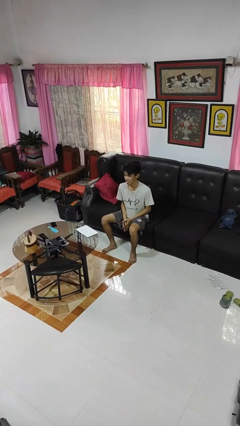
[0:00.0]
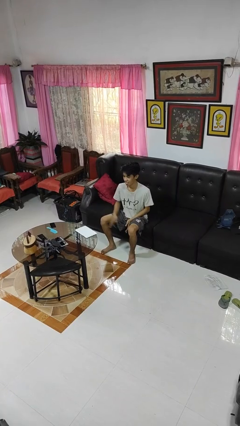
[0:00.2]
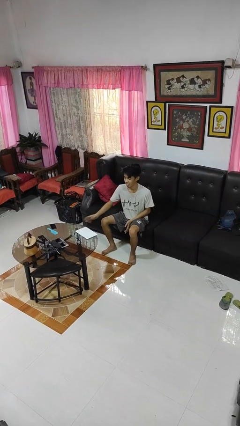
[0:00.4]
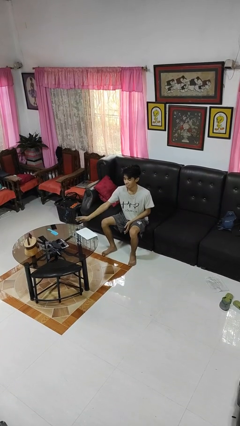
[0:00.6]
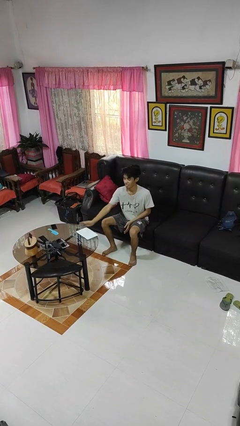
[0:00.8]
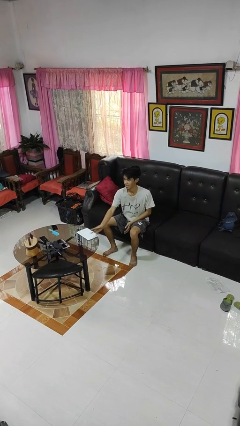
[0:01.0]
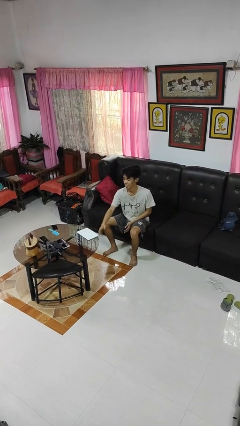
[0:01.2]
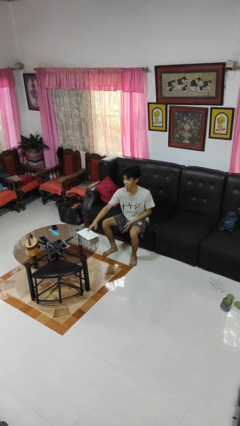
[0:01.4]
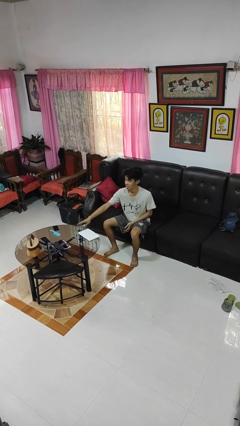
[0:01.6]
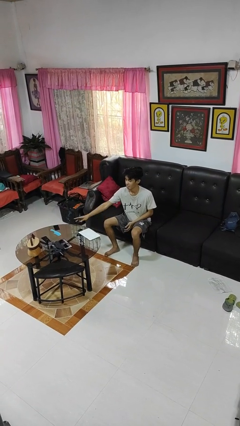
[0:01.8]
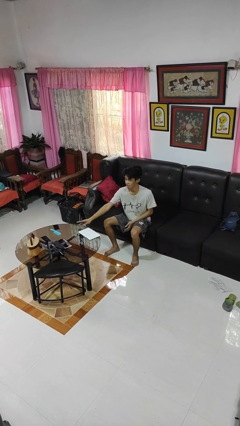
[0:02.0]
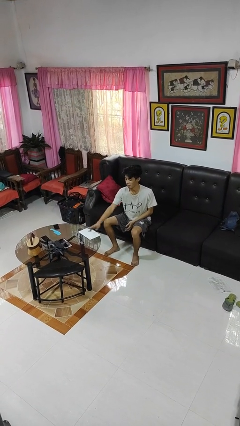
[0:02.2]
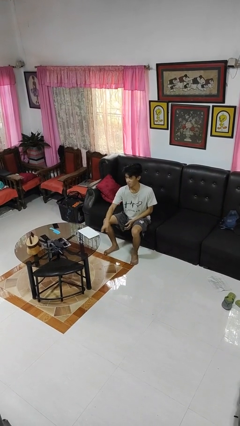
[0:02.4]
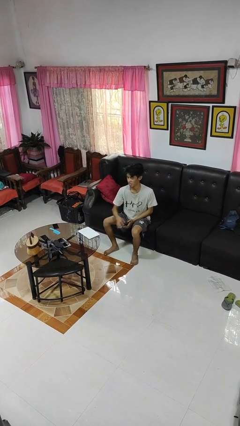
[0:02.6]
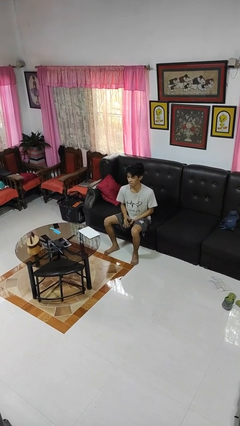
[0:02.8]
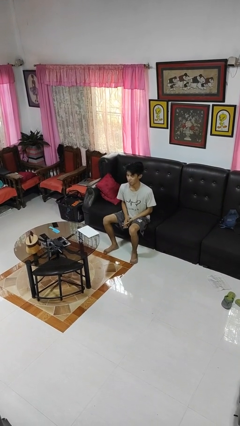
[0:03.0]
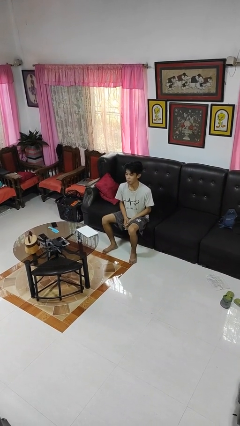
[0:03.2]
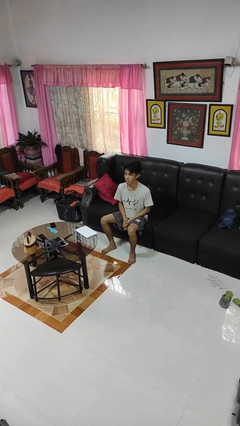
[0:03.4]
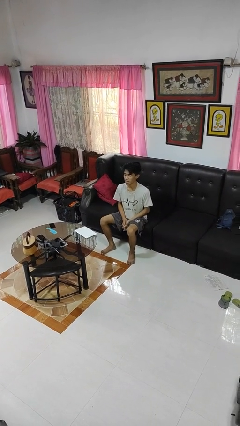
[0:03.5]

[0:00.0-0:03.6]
person waves hand over object

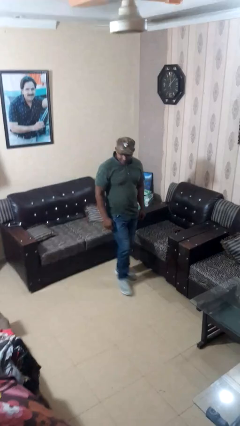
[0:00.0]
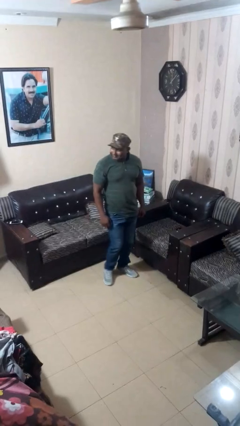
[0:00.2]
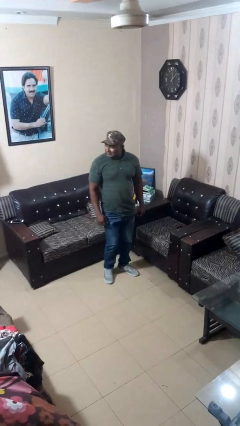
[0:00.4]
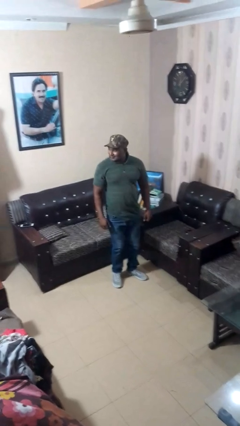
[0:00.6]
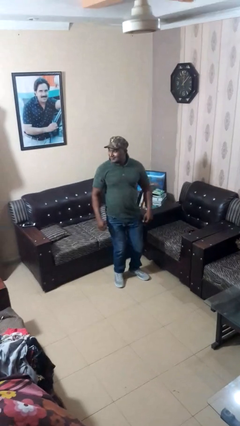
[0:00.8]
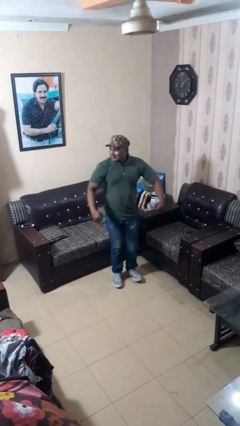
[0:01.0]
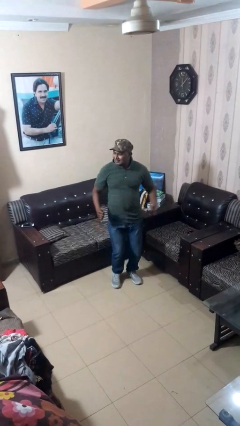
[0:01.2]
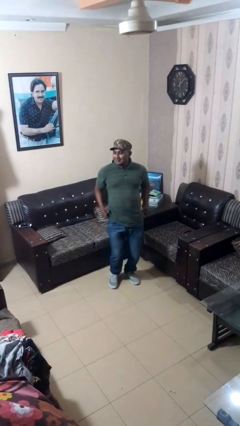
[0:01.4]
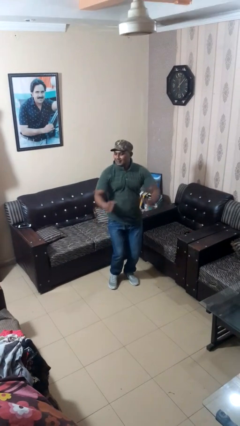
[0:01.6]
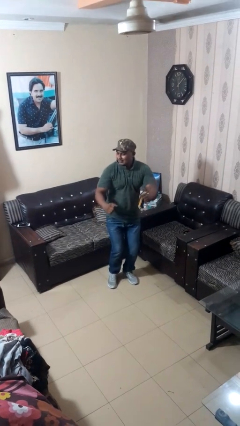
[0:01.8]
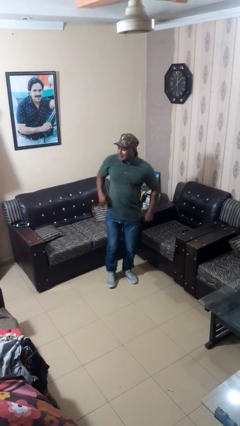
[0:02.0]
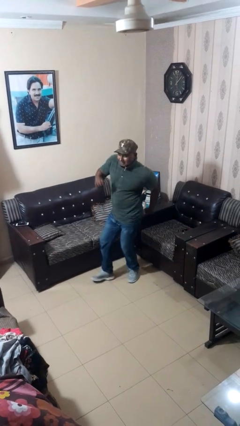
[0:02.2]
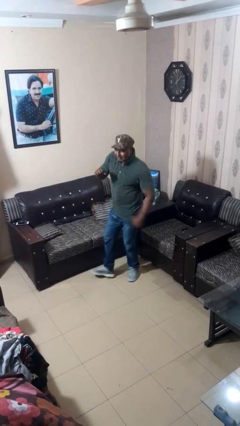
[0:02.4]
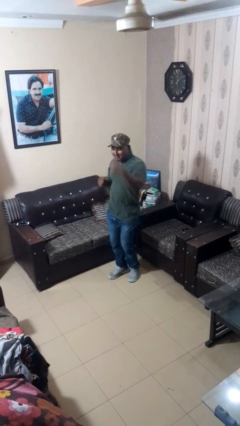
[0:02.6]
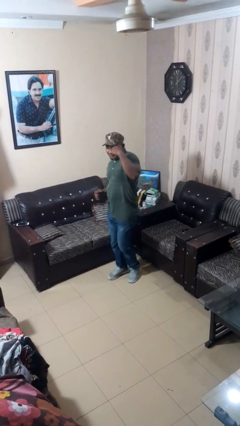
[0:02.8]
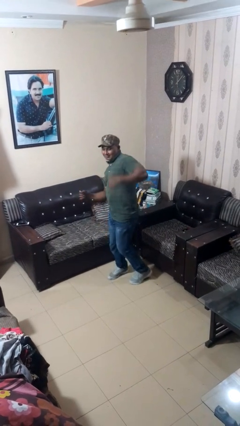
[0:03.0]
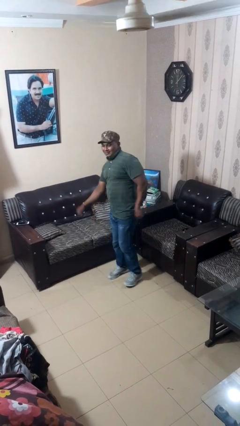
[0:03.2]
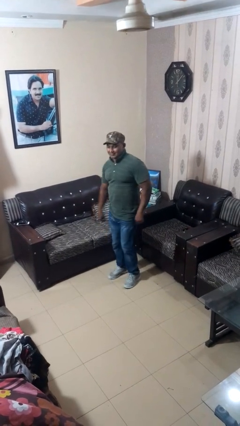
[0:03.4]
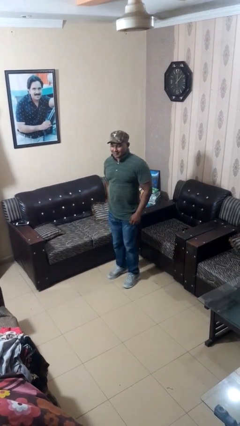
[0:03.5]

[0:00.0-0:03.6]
person dances in place

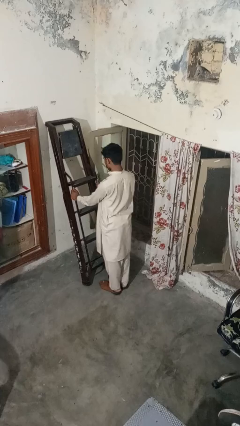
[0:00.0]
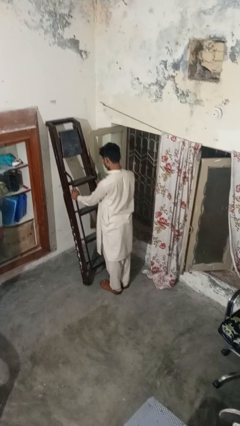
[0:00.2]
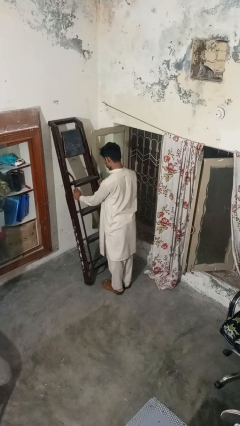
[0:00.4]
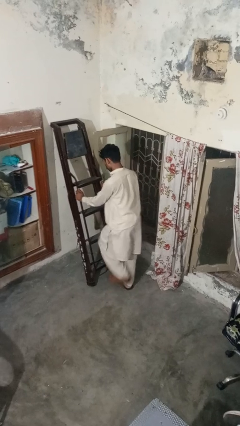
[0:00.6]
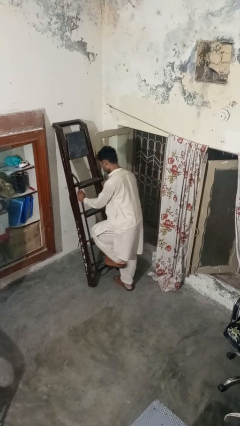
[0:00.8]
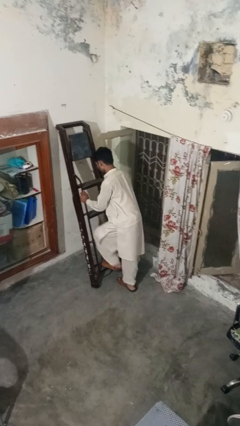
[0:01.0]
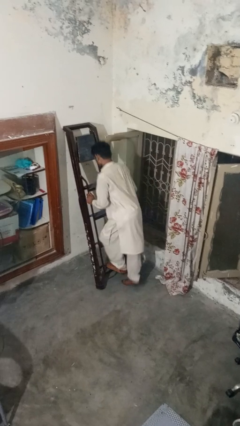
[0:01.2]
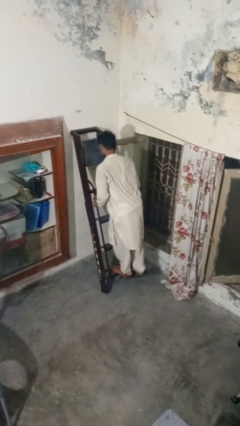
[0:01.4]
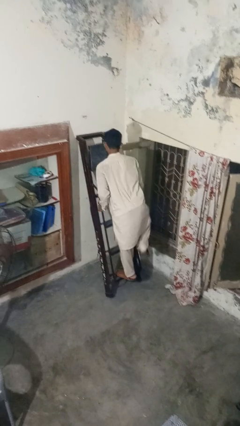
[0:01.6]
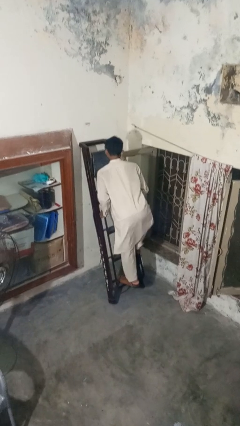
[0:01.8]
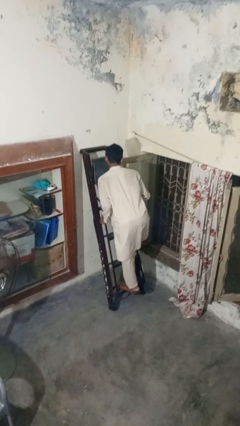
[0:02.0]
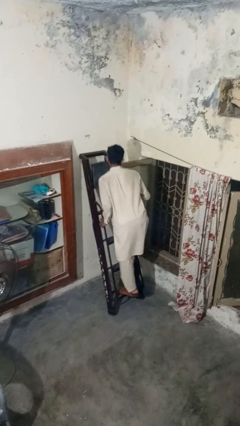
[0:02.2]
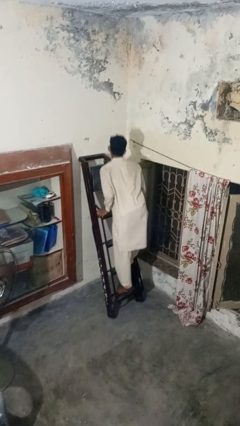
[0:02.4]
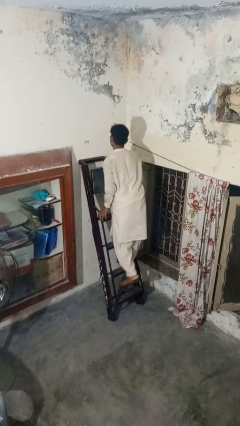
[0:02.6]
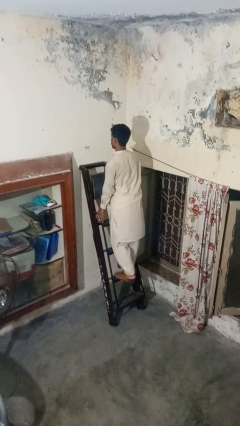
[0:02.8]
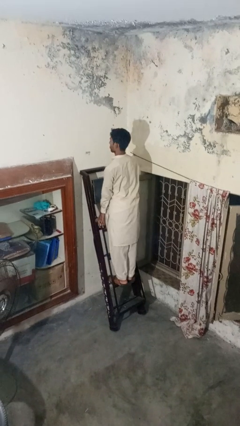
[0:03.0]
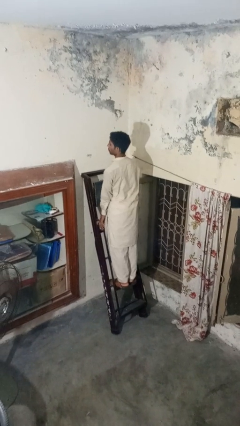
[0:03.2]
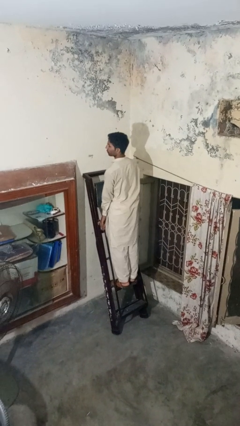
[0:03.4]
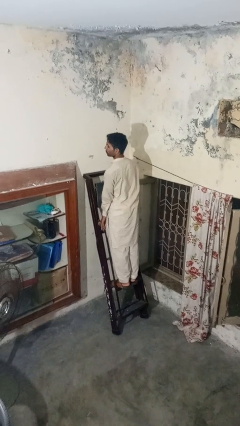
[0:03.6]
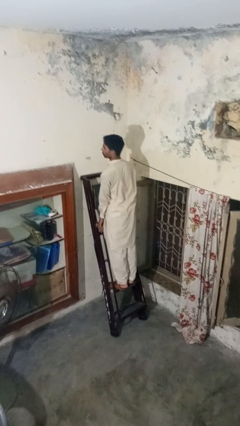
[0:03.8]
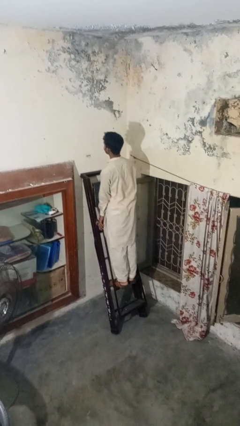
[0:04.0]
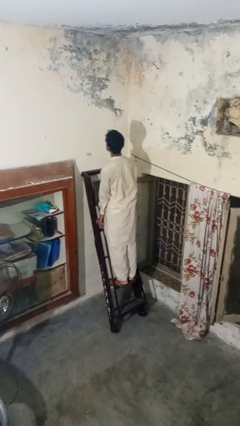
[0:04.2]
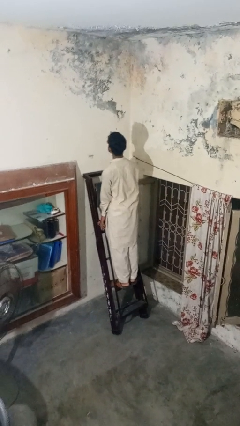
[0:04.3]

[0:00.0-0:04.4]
person climbs up ladder

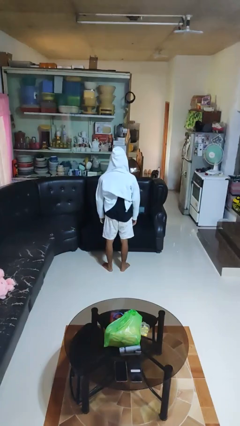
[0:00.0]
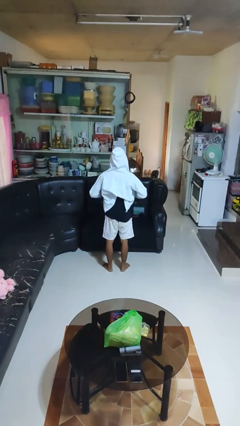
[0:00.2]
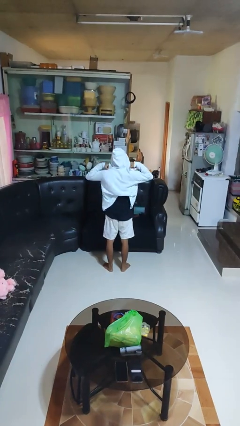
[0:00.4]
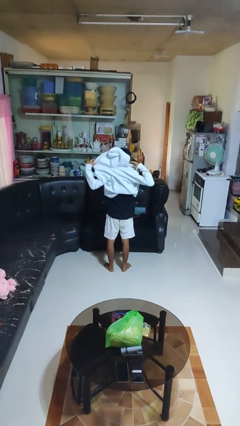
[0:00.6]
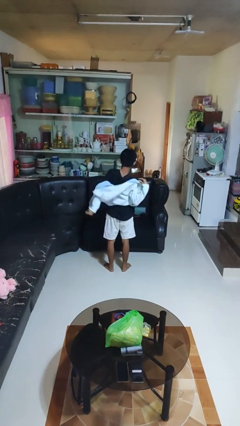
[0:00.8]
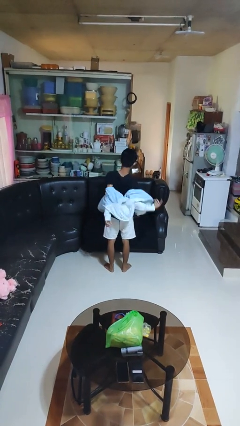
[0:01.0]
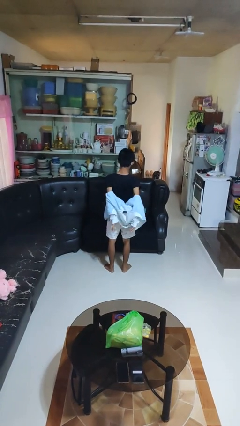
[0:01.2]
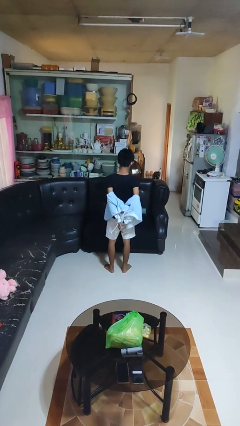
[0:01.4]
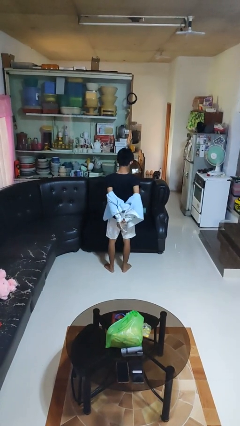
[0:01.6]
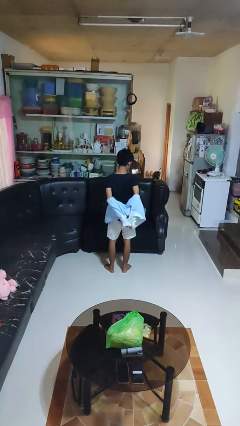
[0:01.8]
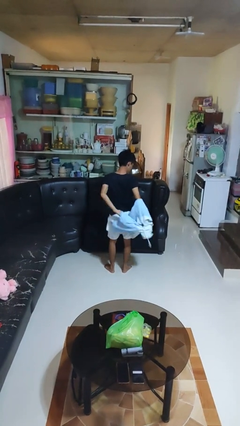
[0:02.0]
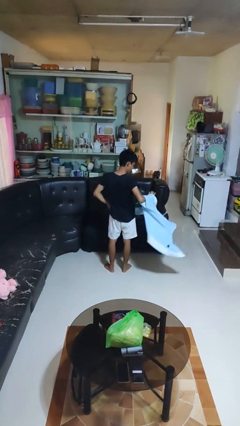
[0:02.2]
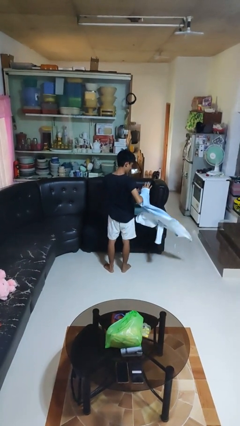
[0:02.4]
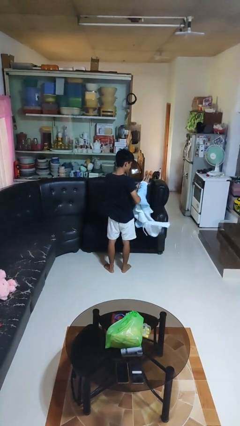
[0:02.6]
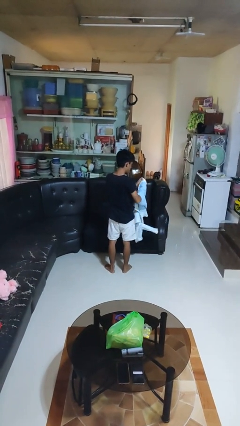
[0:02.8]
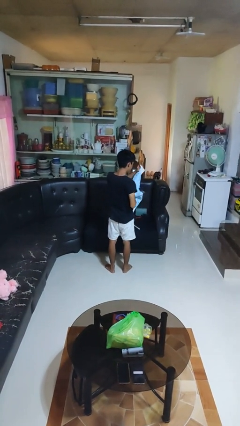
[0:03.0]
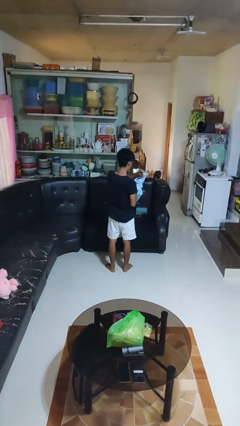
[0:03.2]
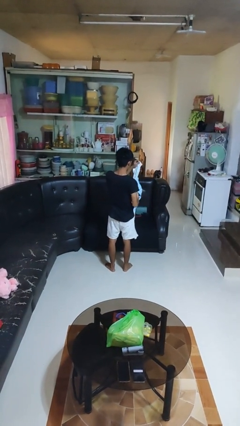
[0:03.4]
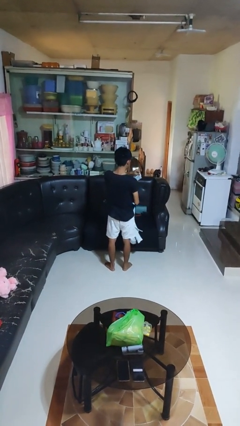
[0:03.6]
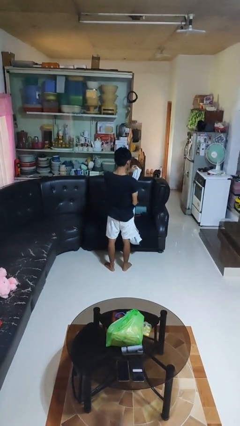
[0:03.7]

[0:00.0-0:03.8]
person takes off hoodie

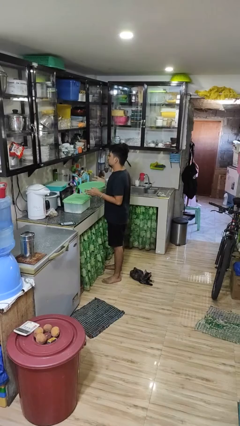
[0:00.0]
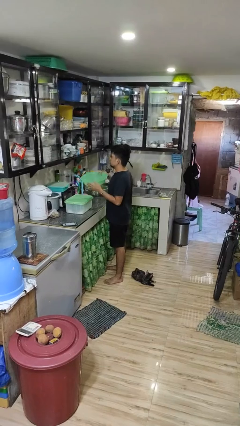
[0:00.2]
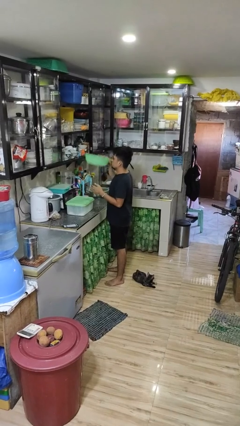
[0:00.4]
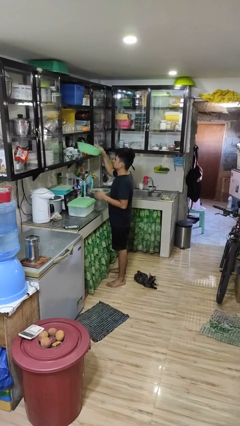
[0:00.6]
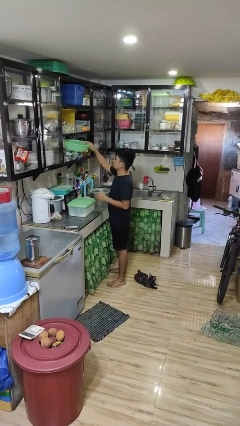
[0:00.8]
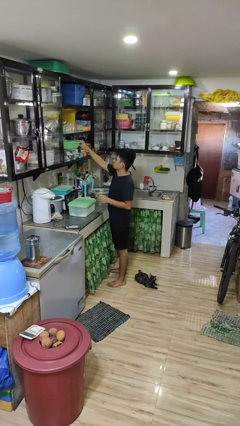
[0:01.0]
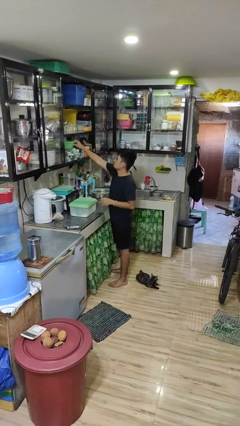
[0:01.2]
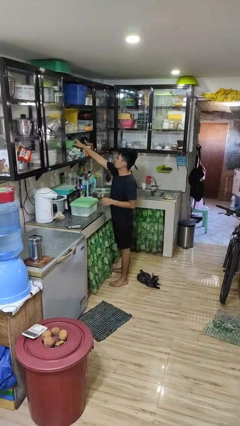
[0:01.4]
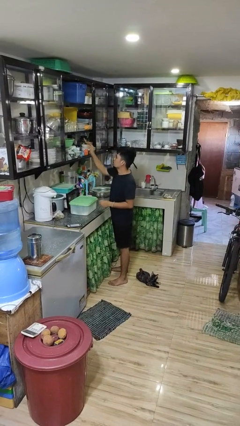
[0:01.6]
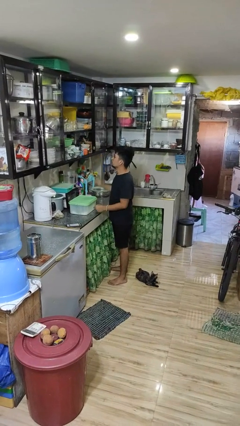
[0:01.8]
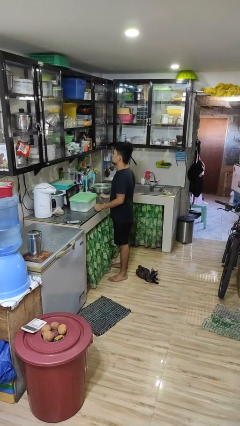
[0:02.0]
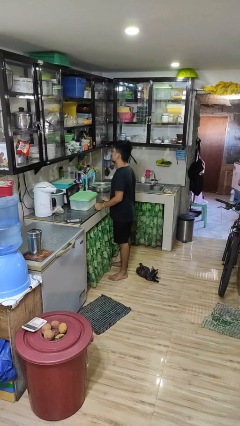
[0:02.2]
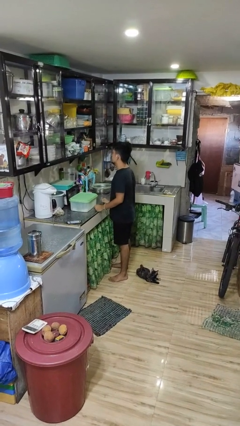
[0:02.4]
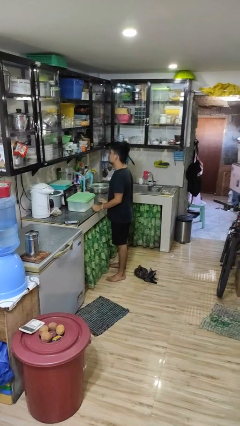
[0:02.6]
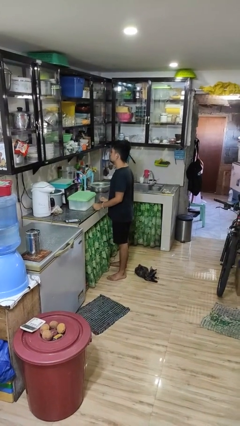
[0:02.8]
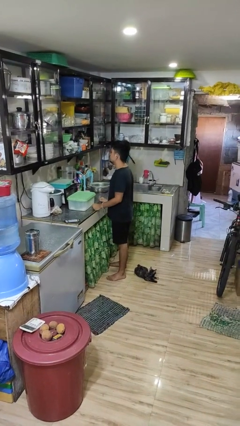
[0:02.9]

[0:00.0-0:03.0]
person puts down object into cabinet
